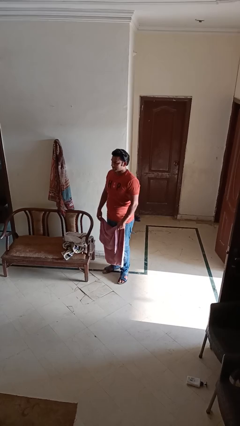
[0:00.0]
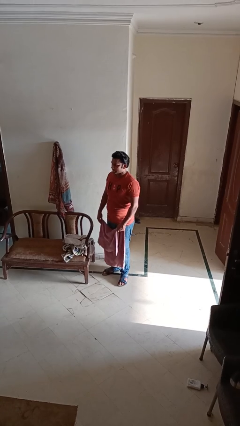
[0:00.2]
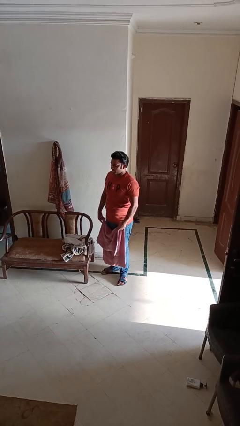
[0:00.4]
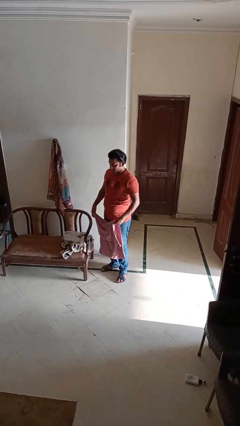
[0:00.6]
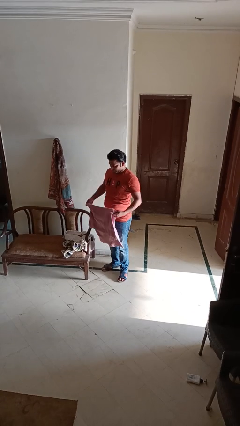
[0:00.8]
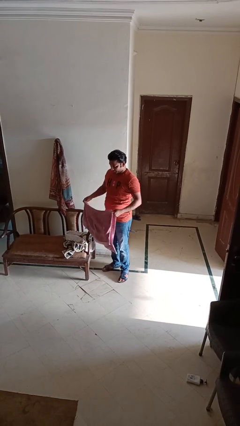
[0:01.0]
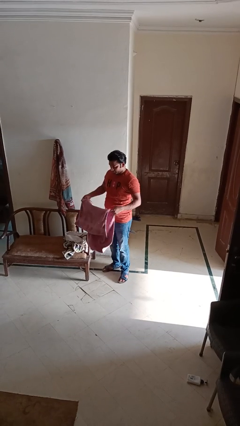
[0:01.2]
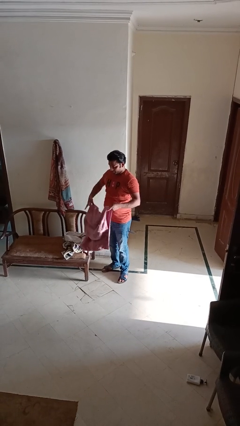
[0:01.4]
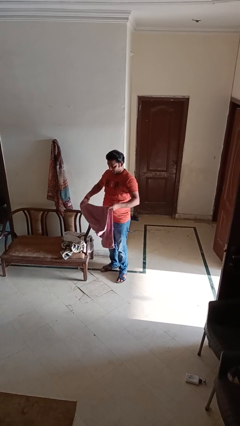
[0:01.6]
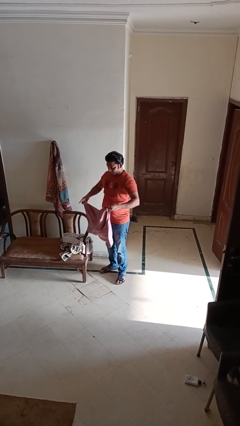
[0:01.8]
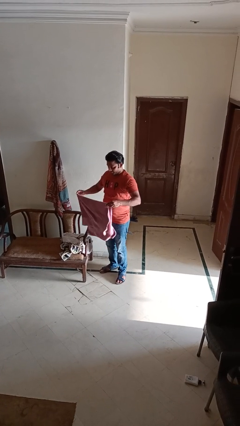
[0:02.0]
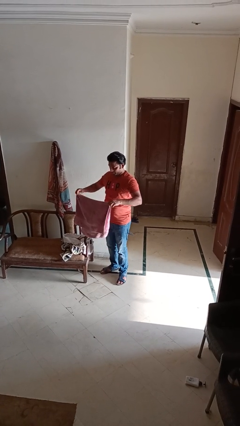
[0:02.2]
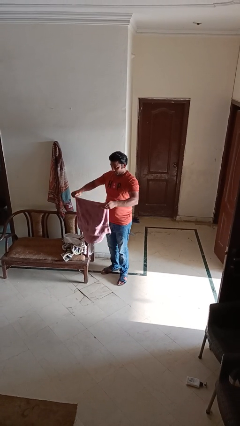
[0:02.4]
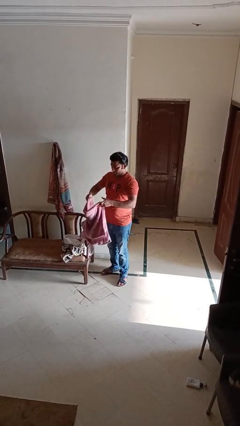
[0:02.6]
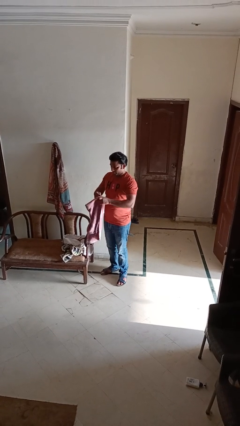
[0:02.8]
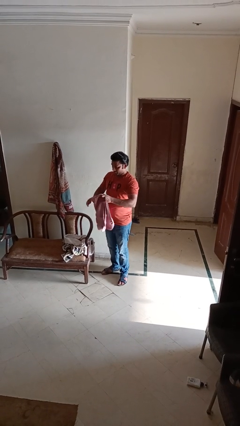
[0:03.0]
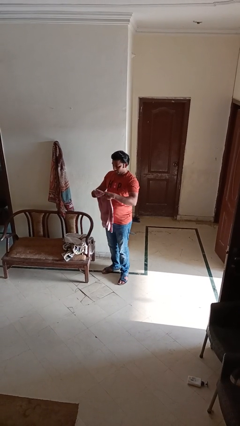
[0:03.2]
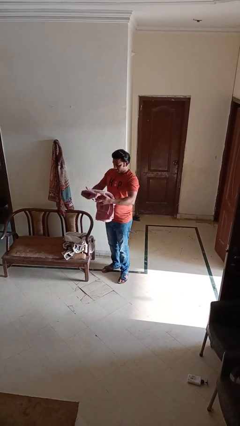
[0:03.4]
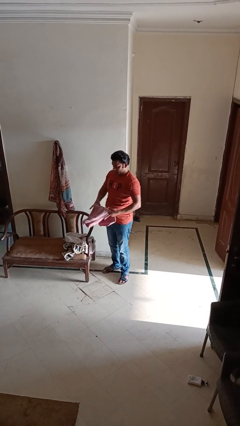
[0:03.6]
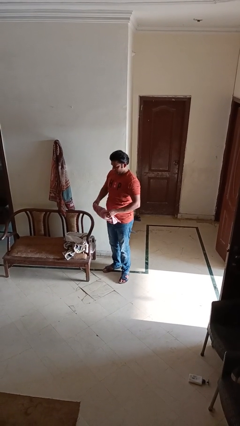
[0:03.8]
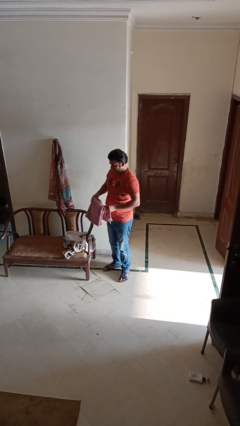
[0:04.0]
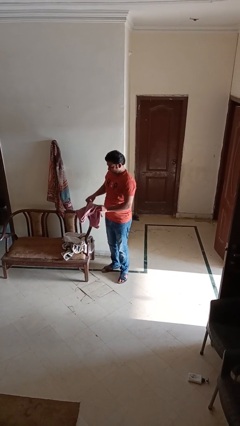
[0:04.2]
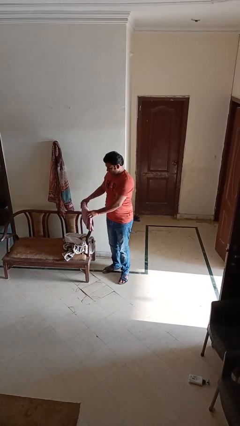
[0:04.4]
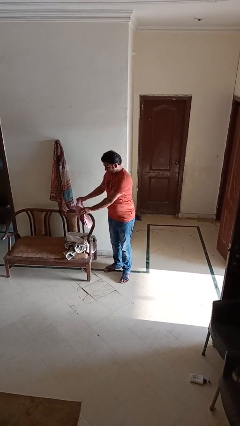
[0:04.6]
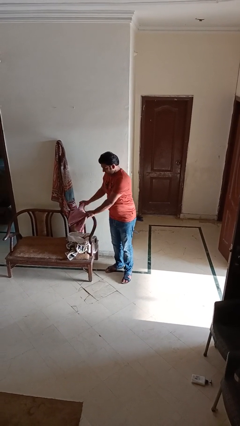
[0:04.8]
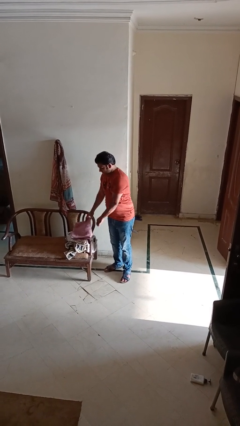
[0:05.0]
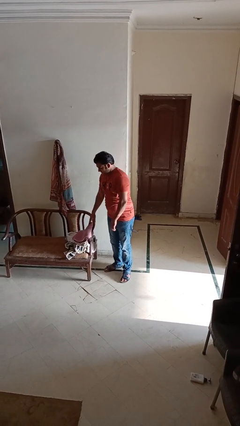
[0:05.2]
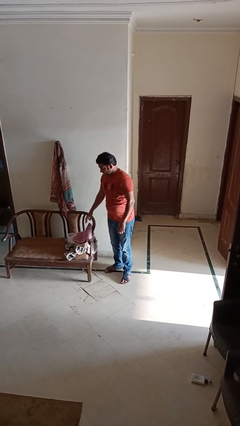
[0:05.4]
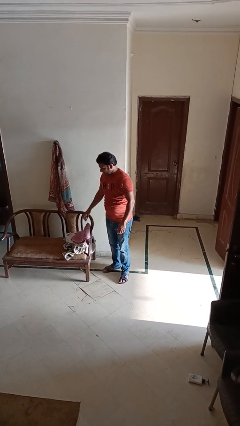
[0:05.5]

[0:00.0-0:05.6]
person folds towel

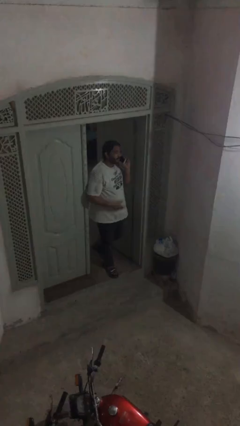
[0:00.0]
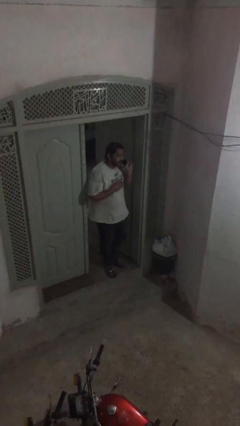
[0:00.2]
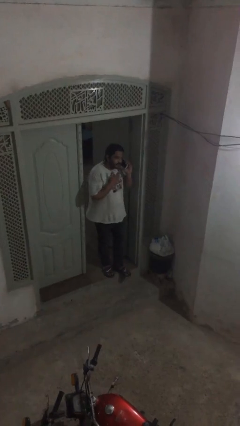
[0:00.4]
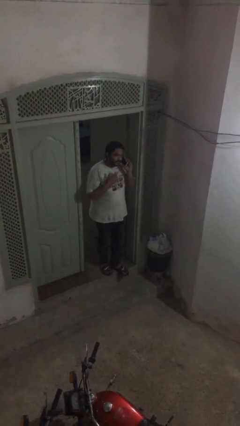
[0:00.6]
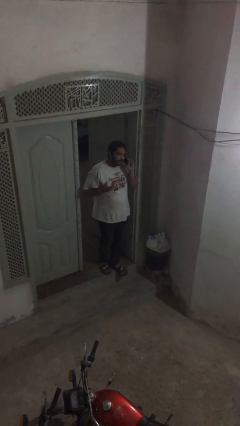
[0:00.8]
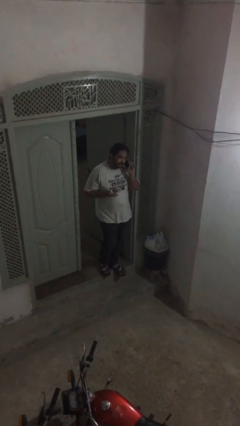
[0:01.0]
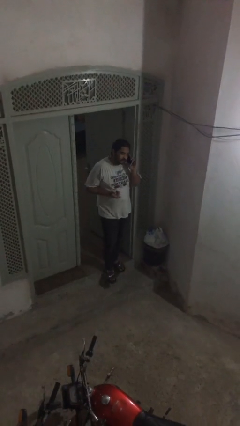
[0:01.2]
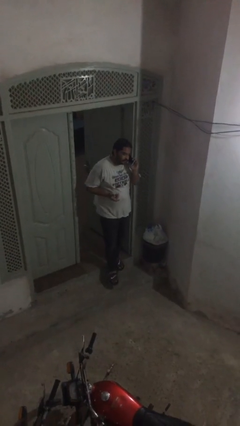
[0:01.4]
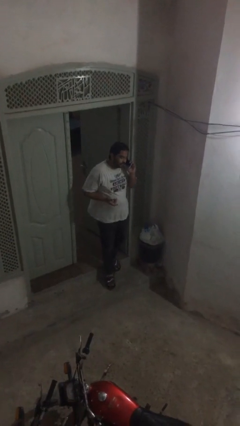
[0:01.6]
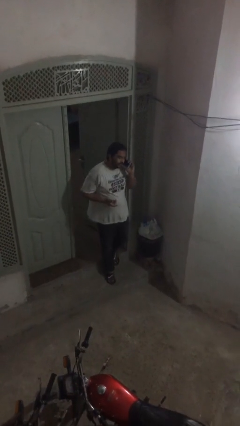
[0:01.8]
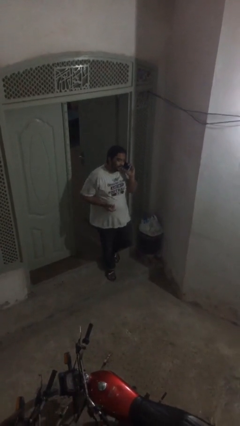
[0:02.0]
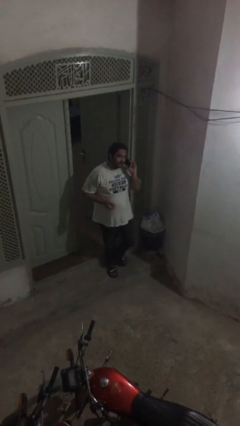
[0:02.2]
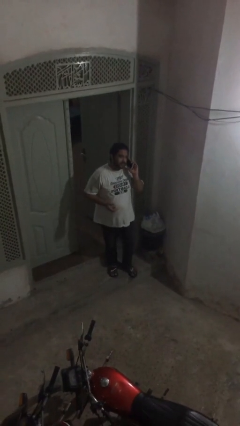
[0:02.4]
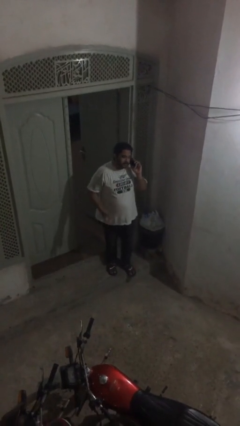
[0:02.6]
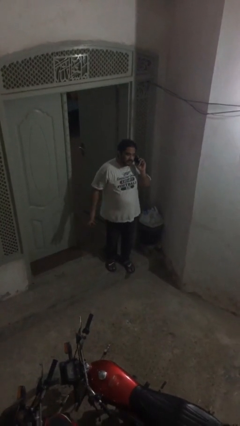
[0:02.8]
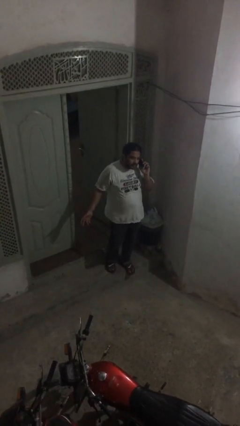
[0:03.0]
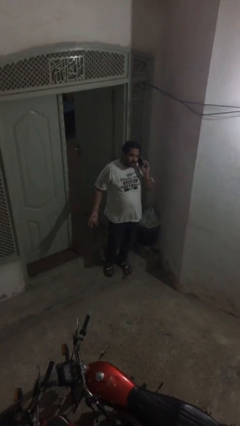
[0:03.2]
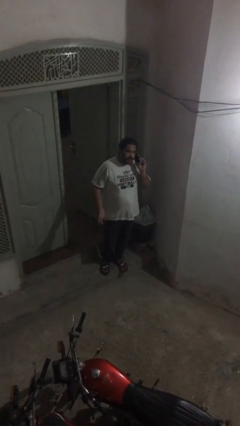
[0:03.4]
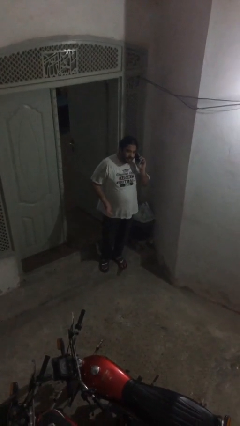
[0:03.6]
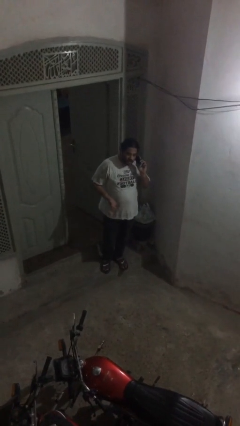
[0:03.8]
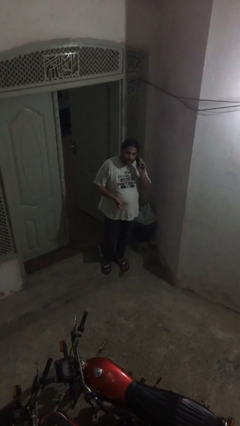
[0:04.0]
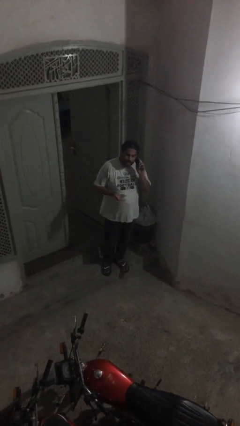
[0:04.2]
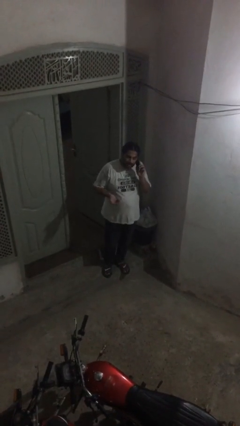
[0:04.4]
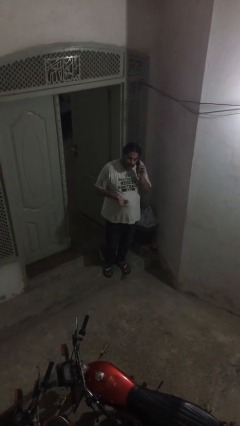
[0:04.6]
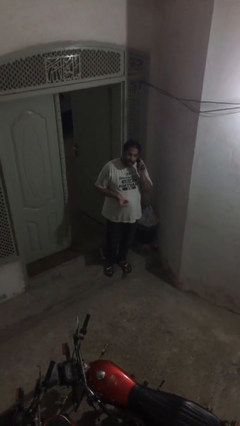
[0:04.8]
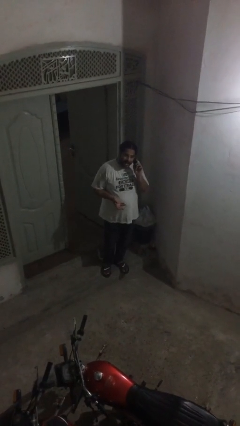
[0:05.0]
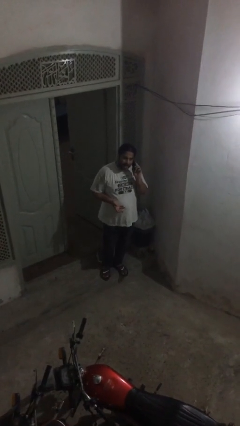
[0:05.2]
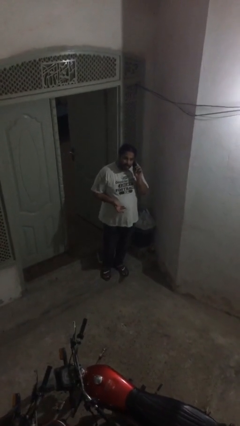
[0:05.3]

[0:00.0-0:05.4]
person enters scene through structure

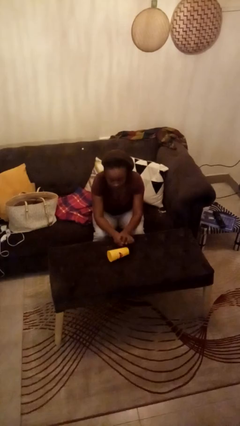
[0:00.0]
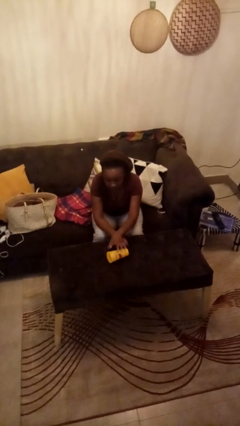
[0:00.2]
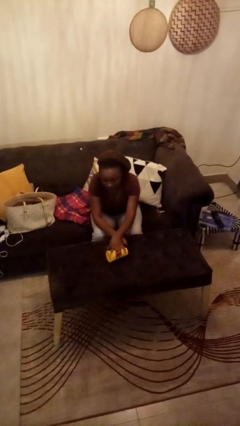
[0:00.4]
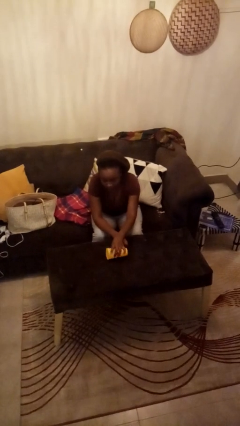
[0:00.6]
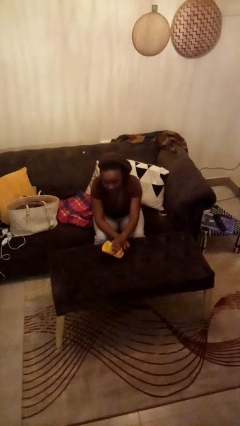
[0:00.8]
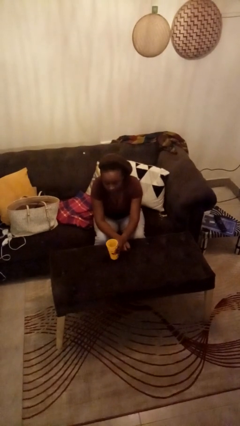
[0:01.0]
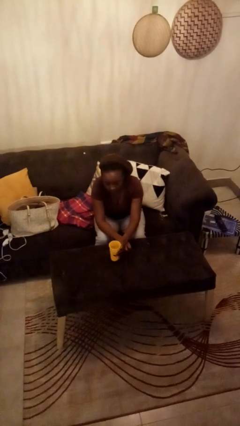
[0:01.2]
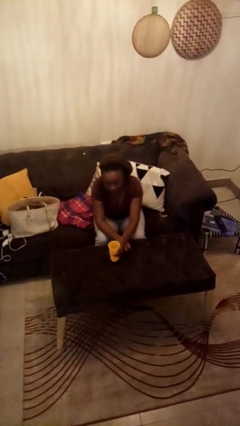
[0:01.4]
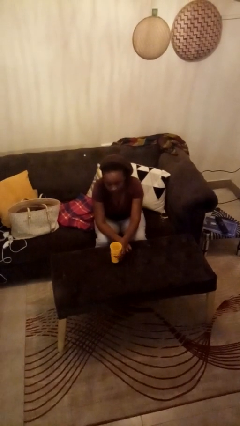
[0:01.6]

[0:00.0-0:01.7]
person sets upright glass

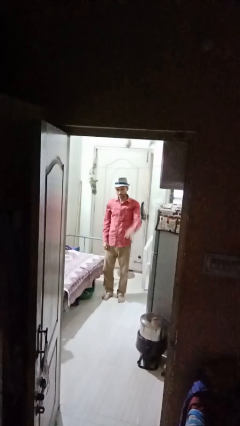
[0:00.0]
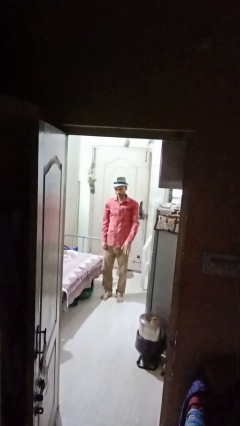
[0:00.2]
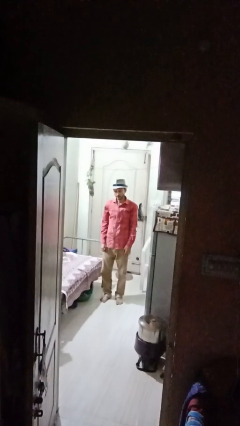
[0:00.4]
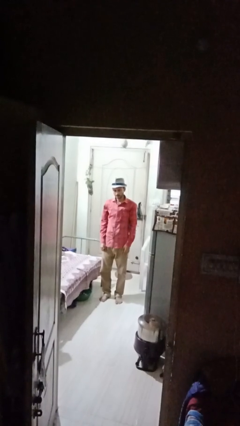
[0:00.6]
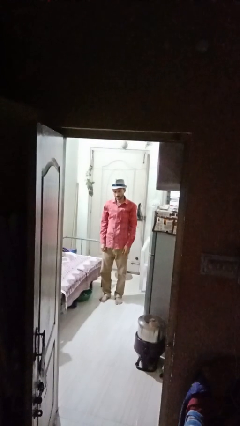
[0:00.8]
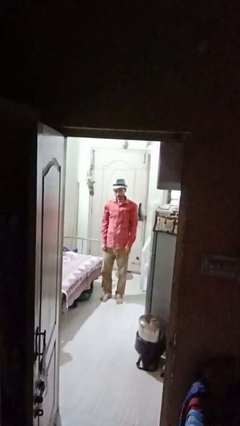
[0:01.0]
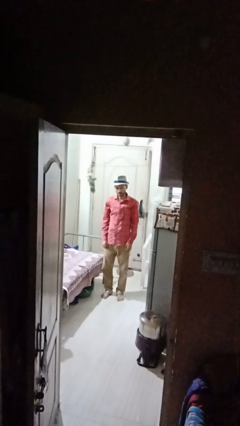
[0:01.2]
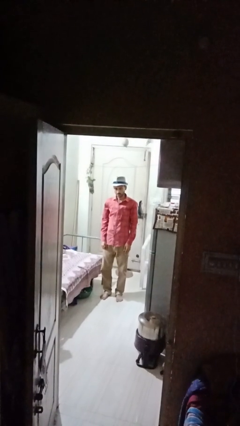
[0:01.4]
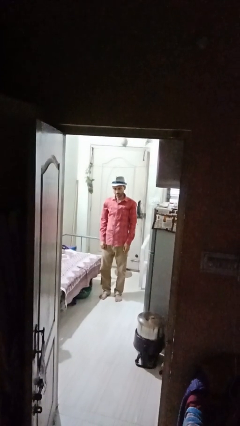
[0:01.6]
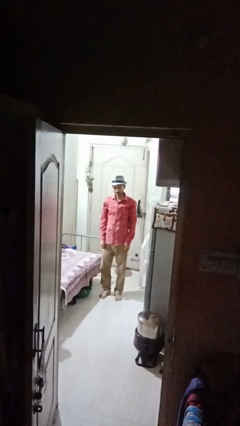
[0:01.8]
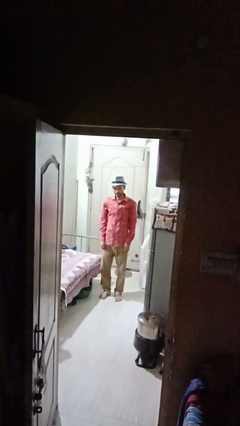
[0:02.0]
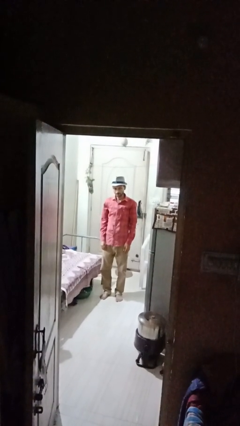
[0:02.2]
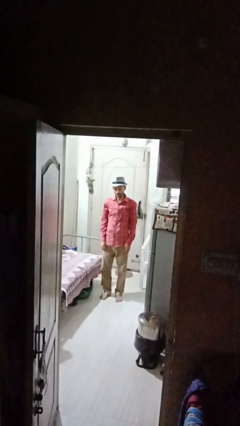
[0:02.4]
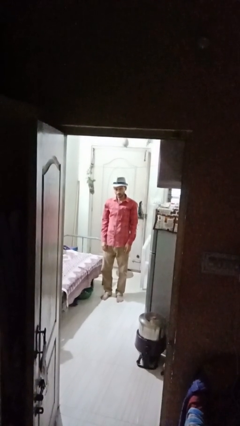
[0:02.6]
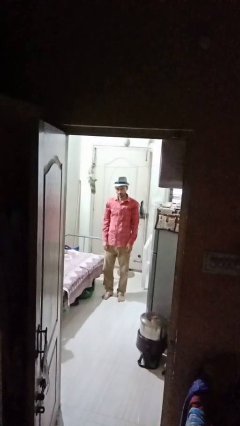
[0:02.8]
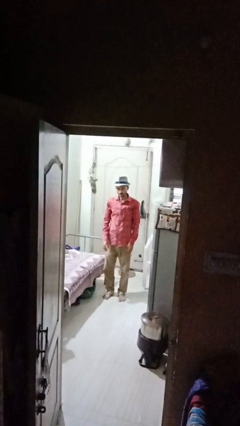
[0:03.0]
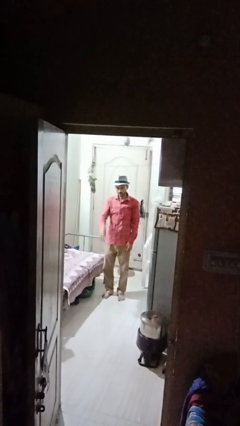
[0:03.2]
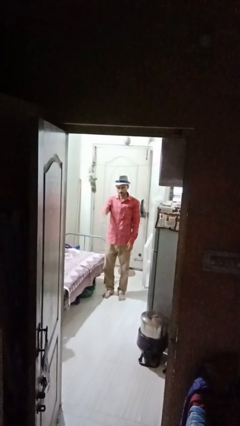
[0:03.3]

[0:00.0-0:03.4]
person gestures lower hand

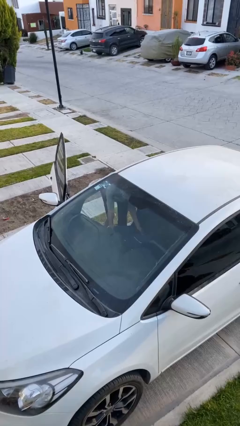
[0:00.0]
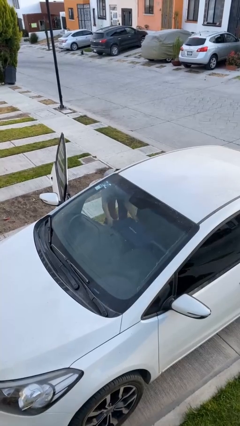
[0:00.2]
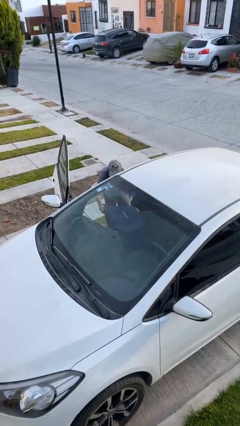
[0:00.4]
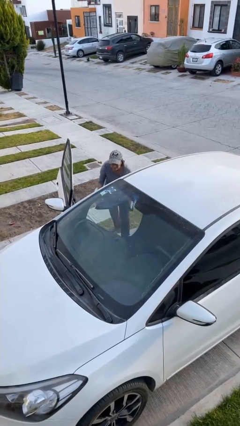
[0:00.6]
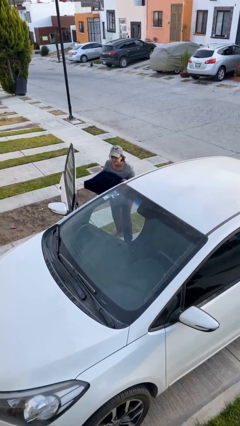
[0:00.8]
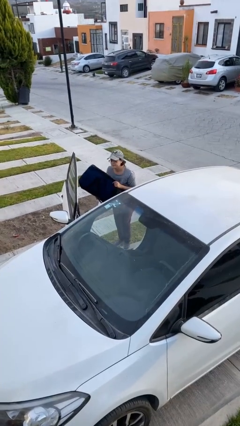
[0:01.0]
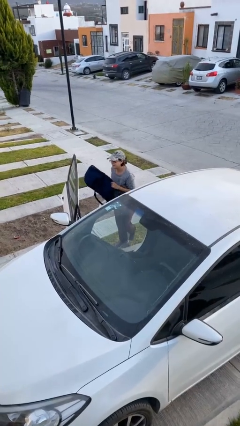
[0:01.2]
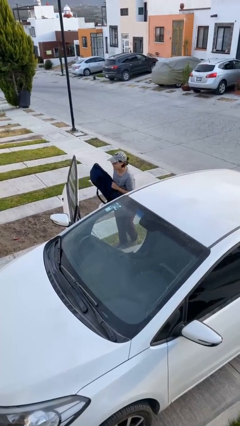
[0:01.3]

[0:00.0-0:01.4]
person unloads car
